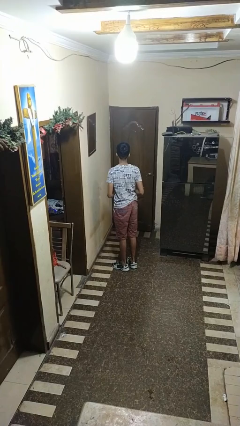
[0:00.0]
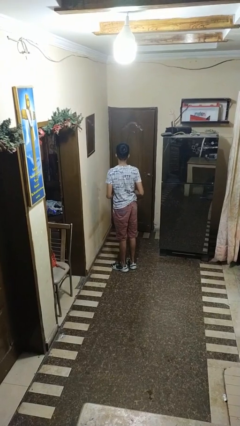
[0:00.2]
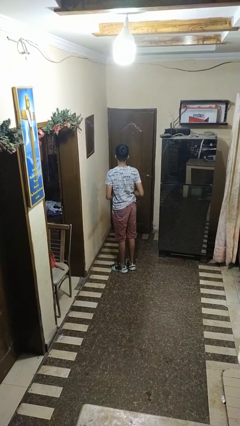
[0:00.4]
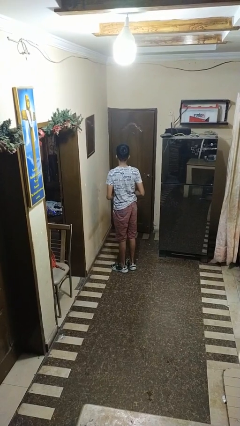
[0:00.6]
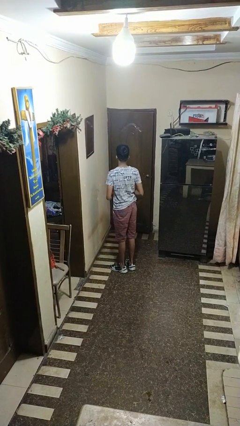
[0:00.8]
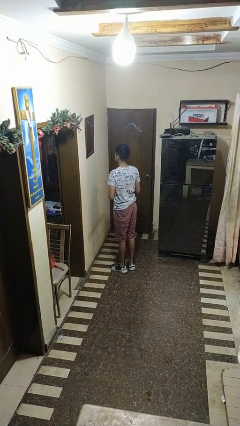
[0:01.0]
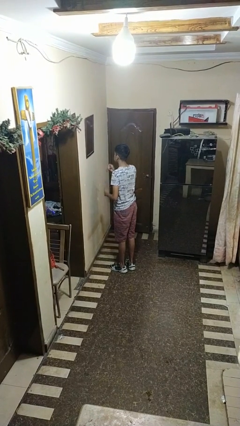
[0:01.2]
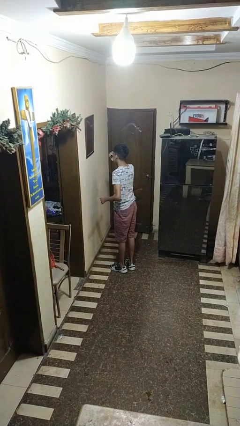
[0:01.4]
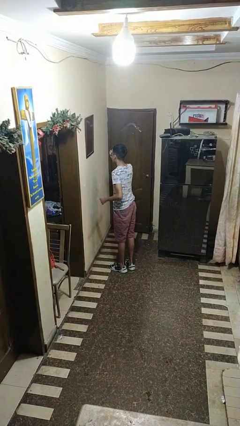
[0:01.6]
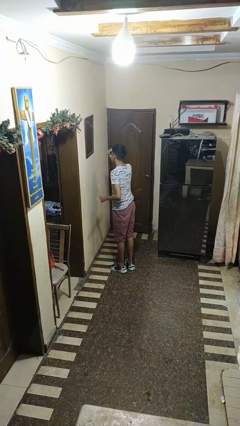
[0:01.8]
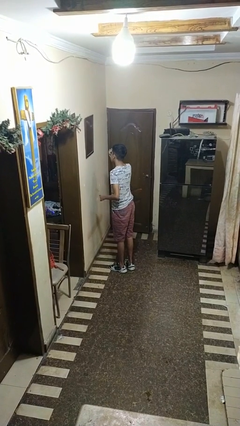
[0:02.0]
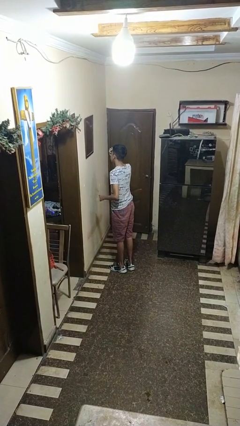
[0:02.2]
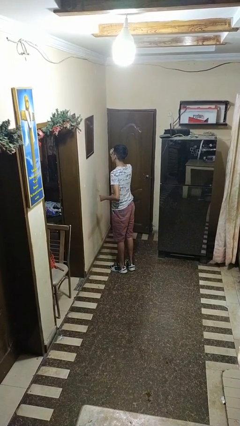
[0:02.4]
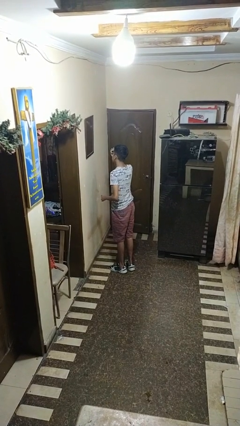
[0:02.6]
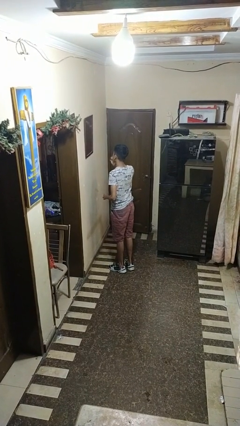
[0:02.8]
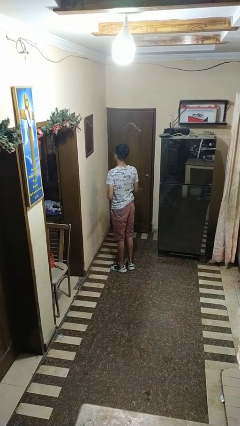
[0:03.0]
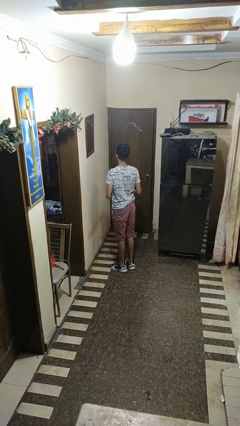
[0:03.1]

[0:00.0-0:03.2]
person applies eye makeup

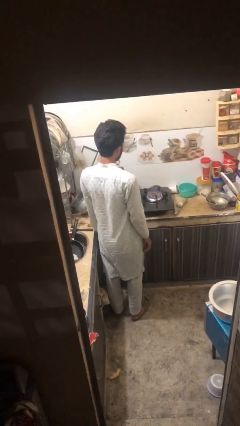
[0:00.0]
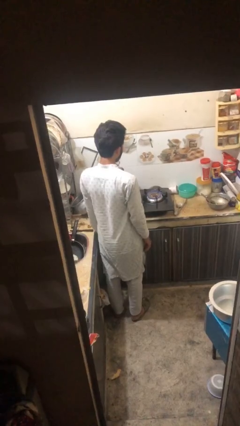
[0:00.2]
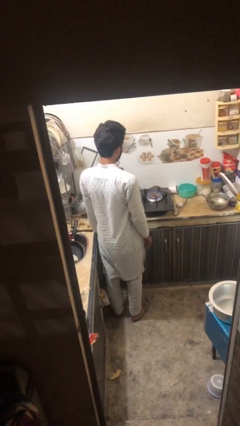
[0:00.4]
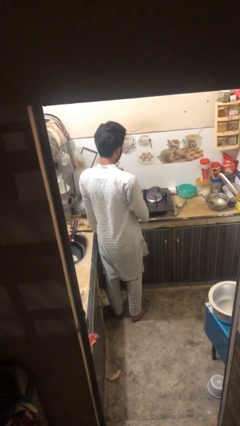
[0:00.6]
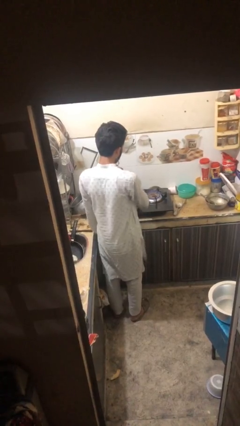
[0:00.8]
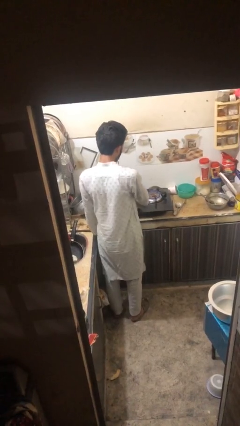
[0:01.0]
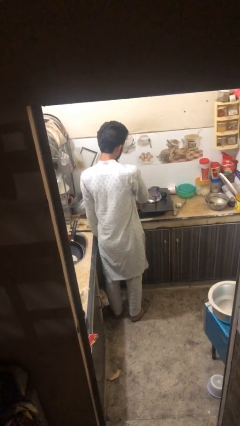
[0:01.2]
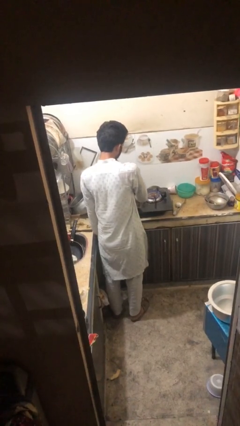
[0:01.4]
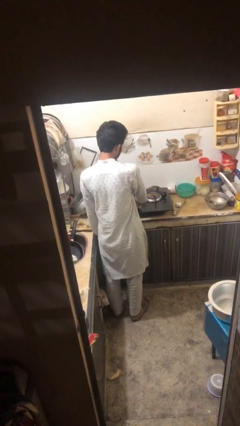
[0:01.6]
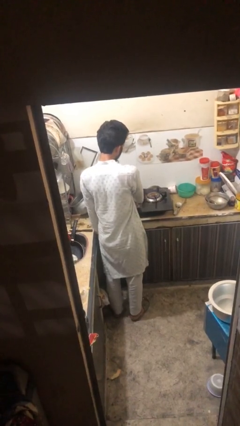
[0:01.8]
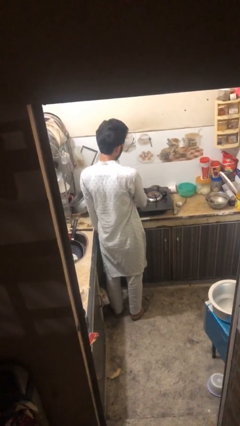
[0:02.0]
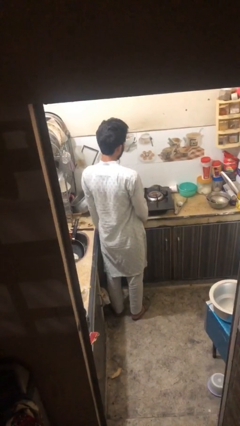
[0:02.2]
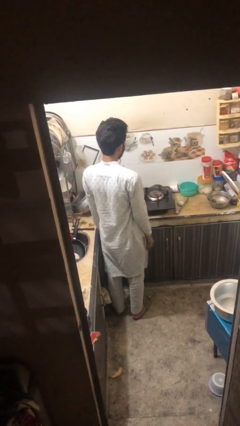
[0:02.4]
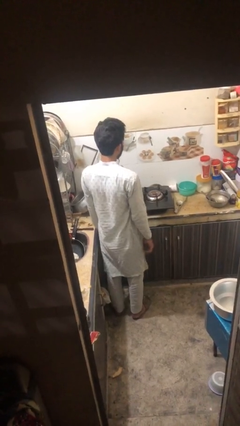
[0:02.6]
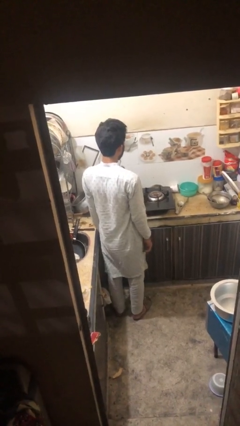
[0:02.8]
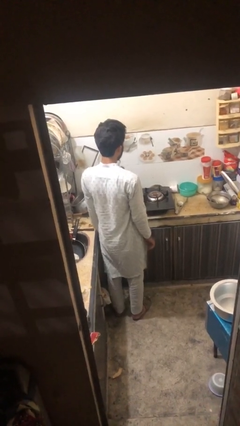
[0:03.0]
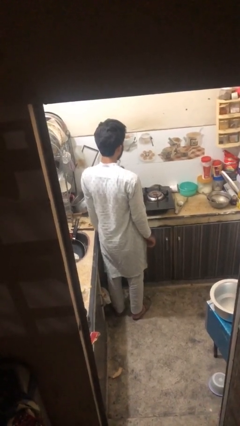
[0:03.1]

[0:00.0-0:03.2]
person turns off stovetop

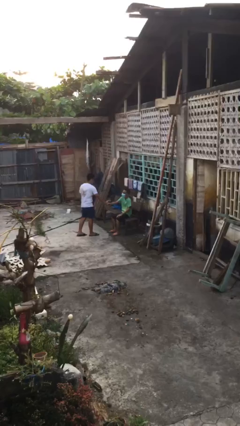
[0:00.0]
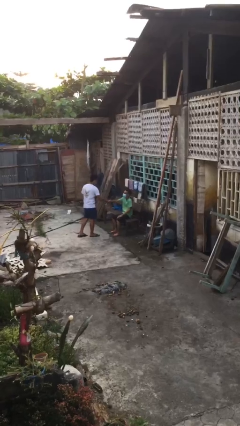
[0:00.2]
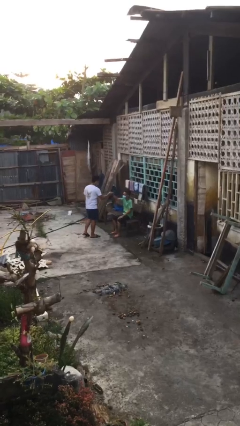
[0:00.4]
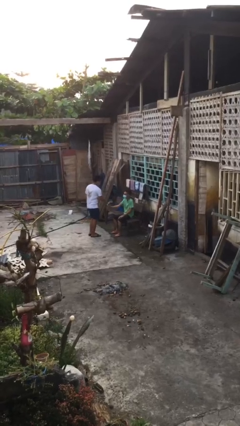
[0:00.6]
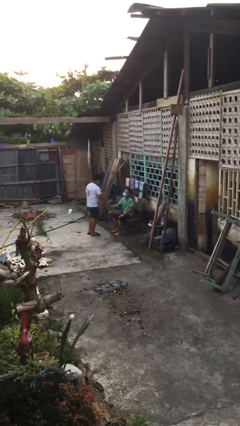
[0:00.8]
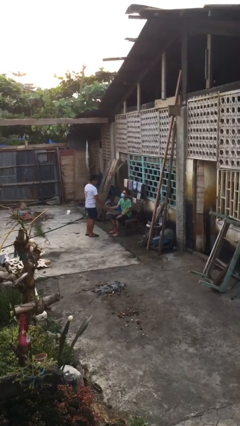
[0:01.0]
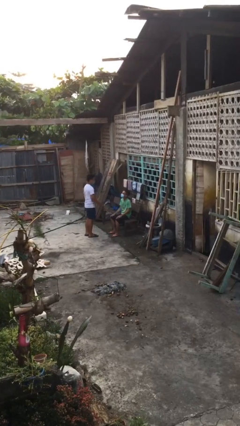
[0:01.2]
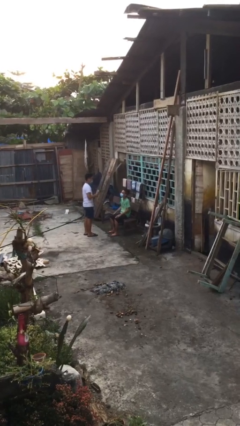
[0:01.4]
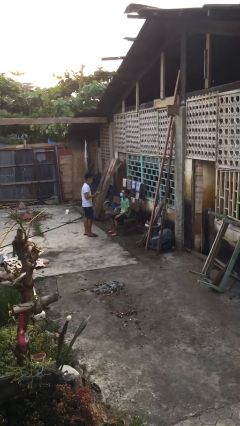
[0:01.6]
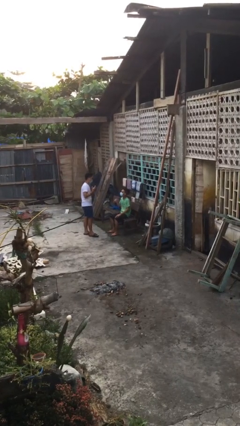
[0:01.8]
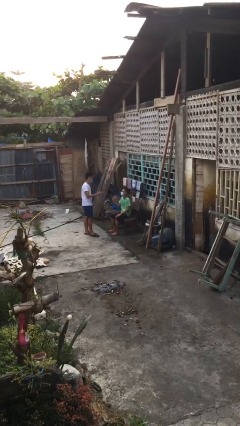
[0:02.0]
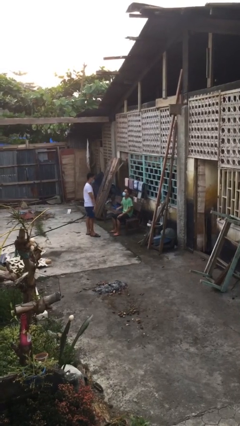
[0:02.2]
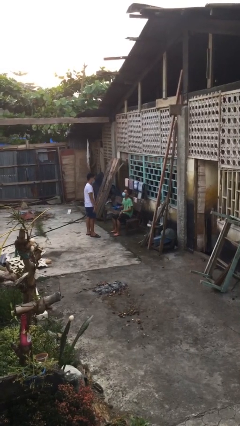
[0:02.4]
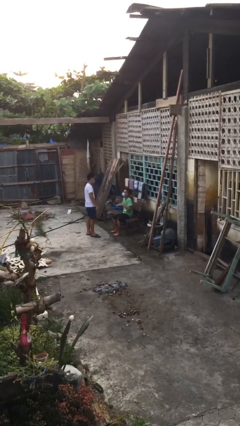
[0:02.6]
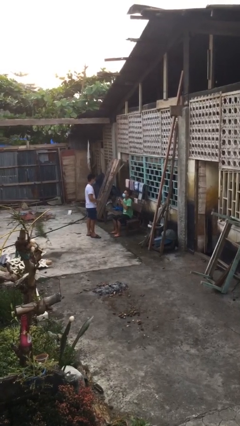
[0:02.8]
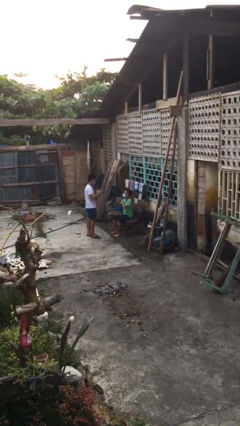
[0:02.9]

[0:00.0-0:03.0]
person shakes hand

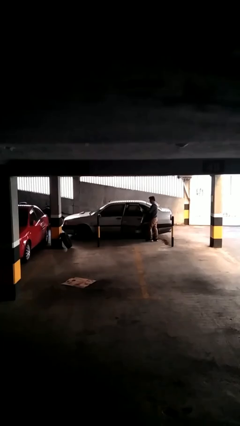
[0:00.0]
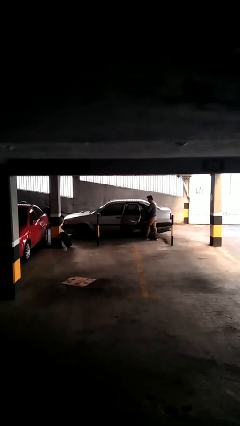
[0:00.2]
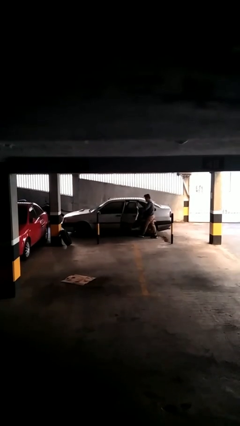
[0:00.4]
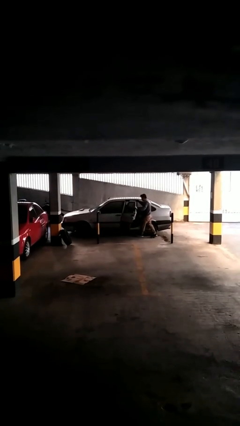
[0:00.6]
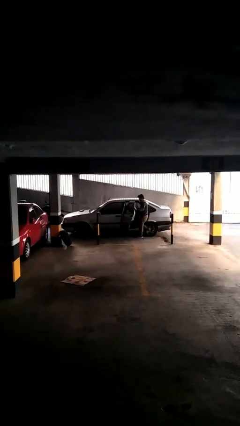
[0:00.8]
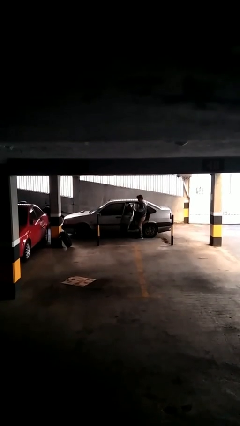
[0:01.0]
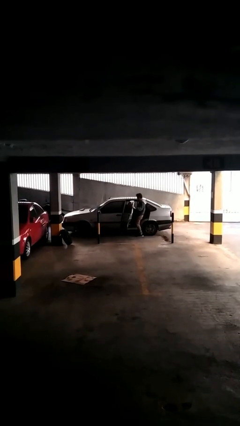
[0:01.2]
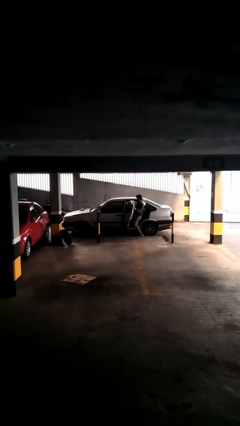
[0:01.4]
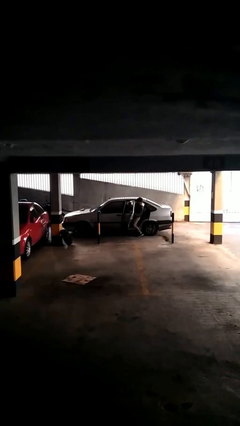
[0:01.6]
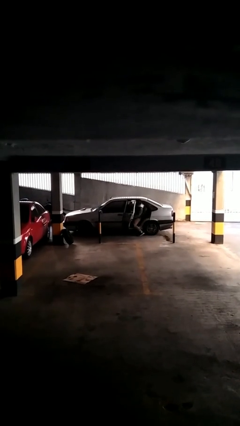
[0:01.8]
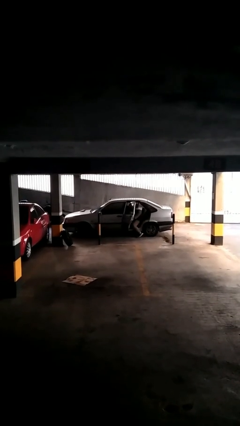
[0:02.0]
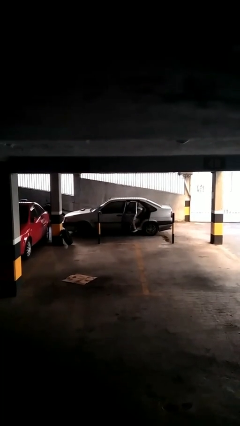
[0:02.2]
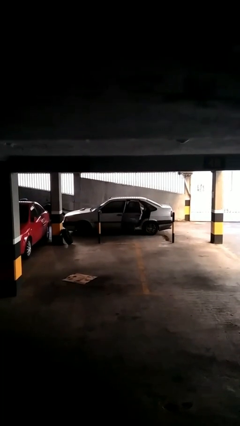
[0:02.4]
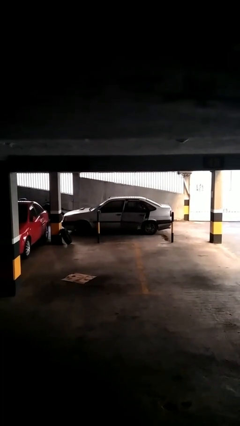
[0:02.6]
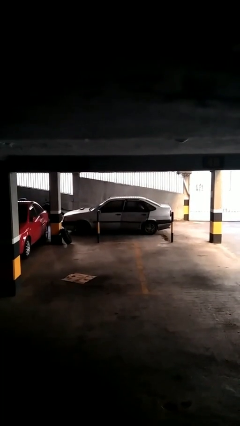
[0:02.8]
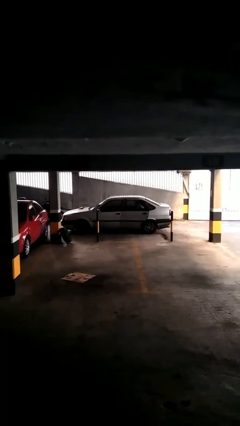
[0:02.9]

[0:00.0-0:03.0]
car picks up person

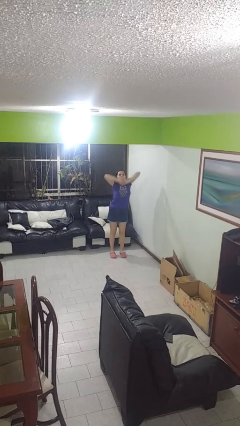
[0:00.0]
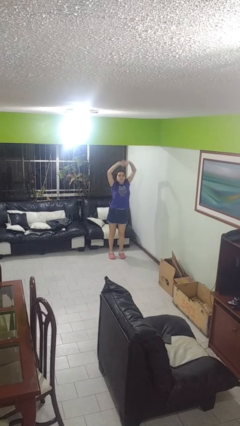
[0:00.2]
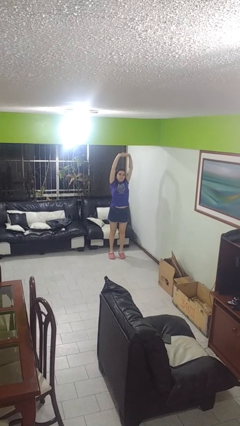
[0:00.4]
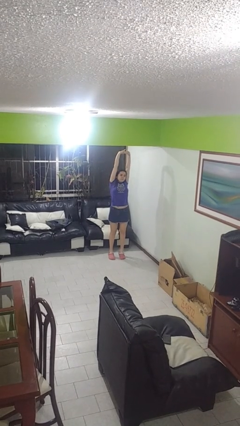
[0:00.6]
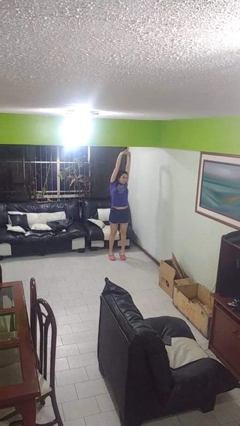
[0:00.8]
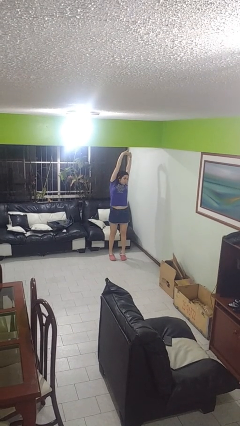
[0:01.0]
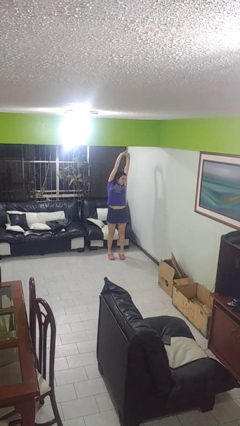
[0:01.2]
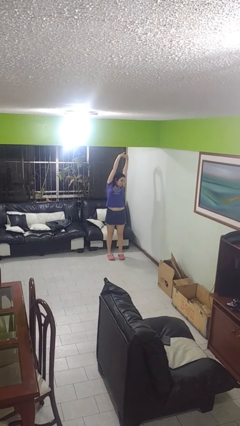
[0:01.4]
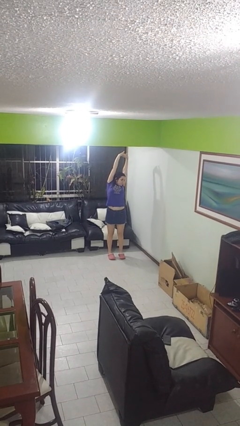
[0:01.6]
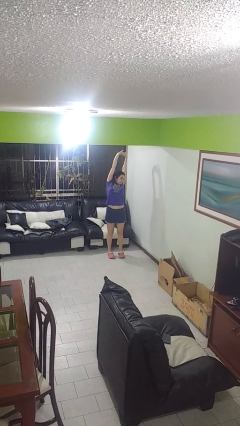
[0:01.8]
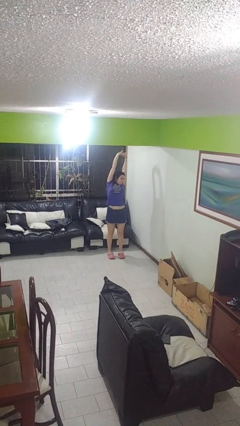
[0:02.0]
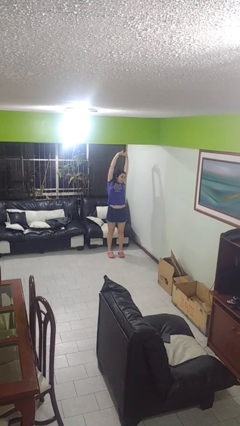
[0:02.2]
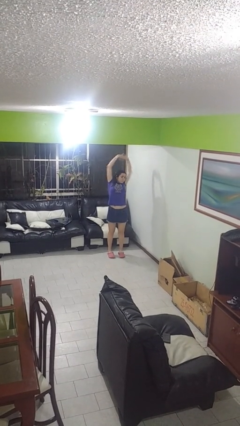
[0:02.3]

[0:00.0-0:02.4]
person stretches arms over head

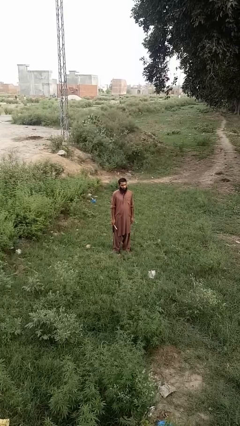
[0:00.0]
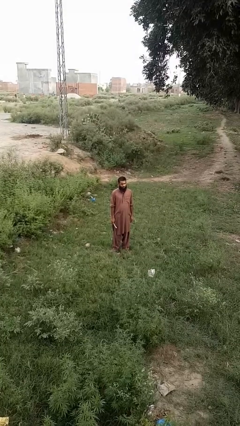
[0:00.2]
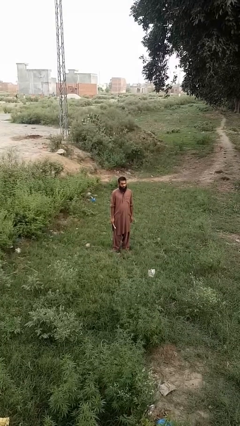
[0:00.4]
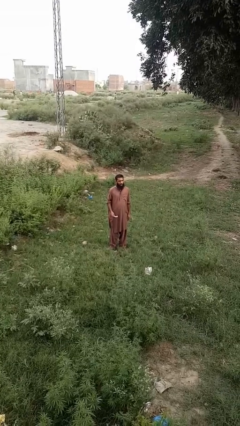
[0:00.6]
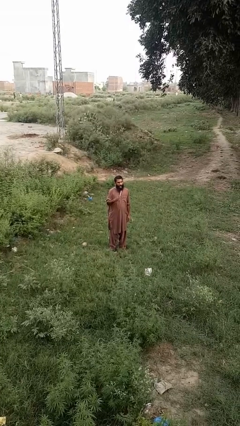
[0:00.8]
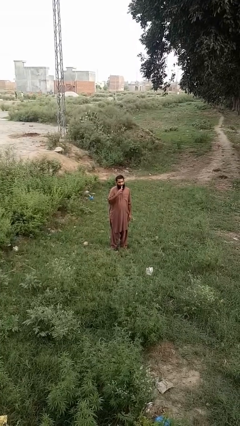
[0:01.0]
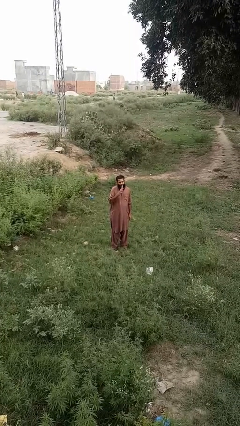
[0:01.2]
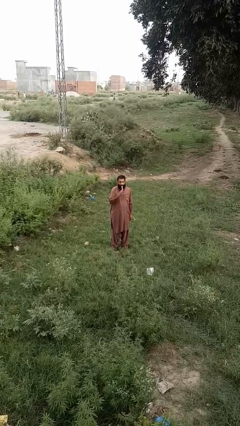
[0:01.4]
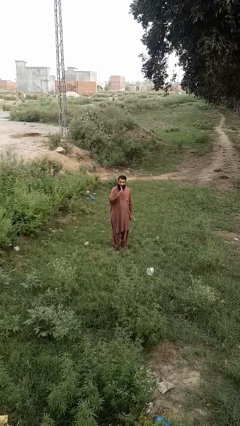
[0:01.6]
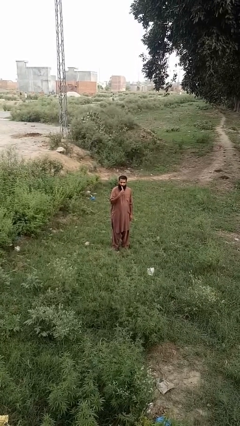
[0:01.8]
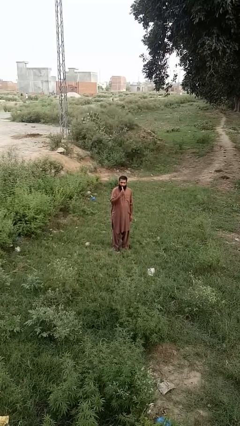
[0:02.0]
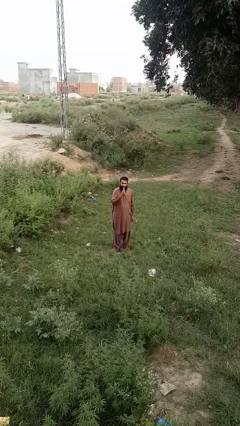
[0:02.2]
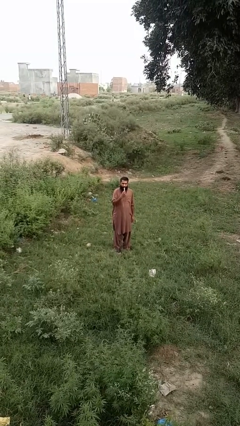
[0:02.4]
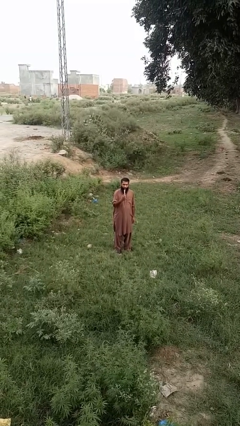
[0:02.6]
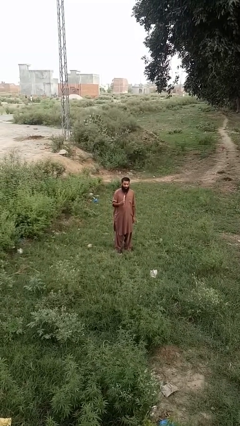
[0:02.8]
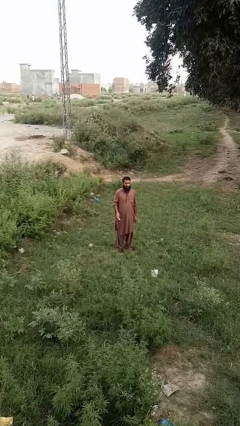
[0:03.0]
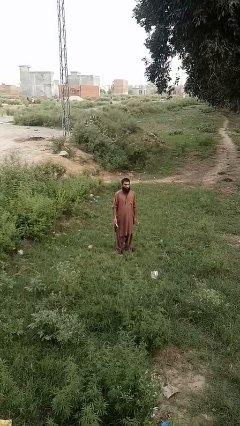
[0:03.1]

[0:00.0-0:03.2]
person brushes teeth
